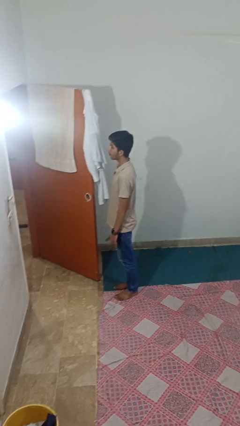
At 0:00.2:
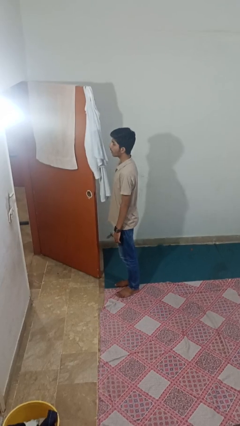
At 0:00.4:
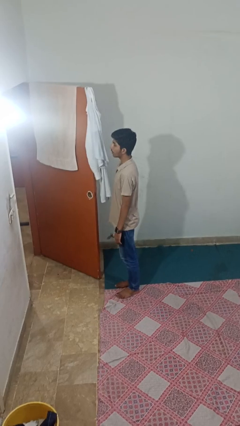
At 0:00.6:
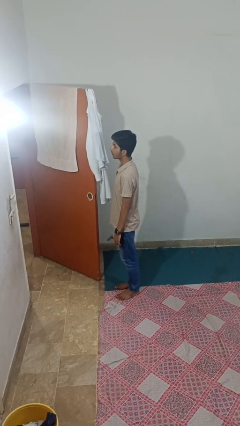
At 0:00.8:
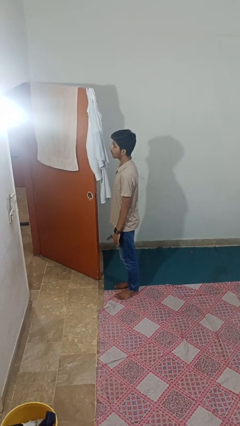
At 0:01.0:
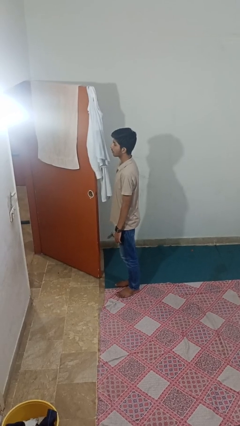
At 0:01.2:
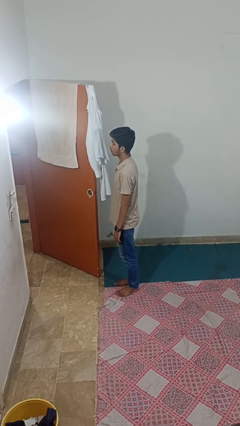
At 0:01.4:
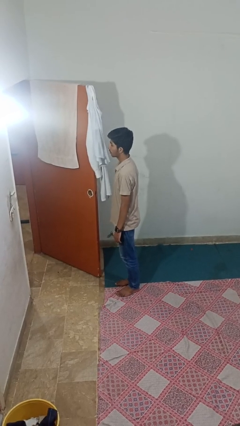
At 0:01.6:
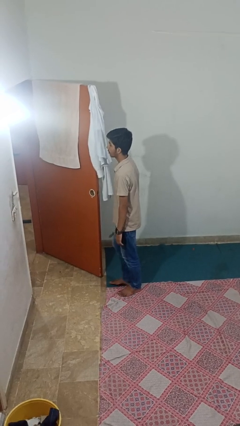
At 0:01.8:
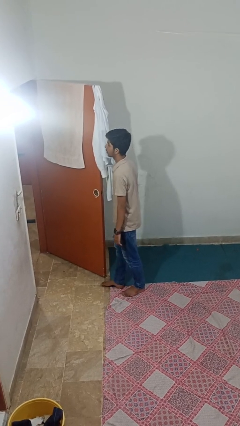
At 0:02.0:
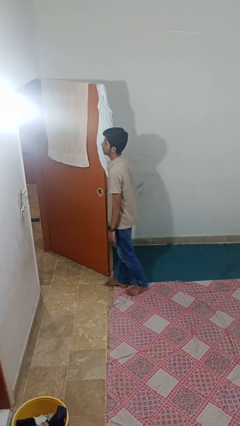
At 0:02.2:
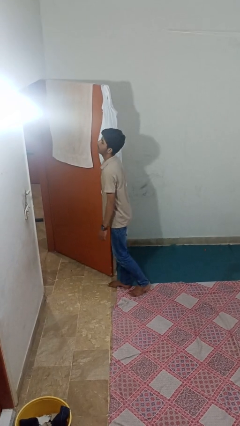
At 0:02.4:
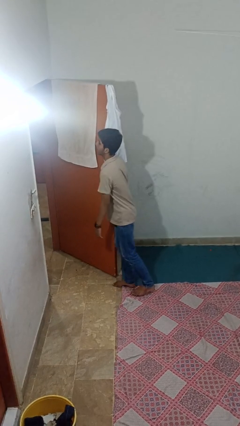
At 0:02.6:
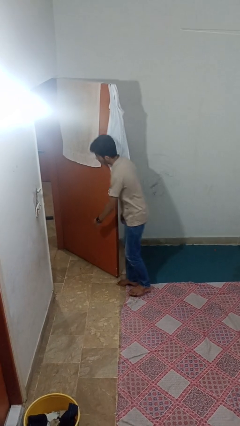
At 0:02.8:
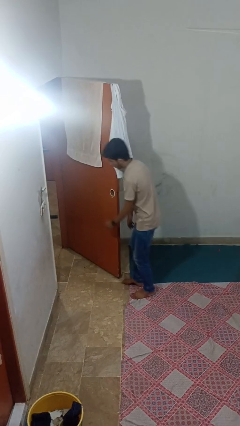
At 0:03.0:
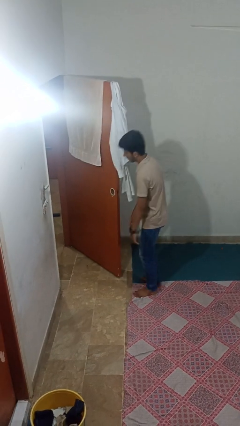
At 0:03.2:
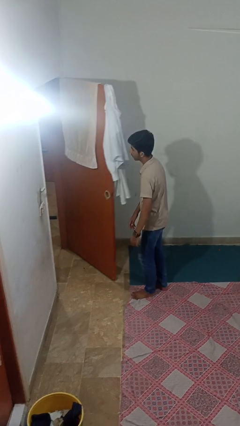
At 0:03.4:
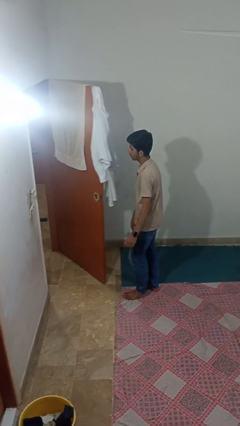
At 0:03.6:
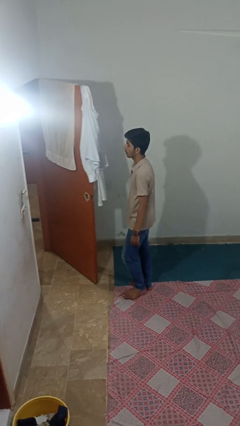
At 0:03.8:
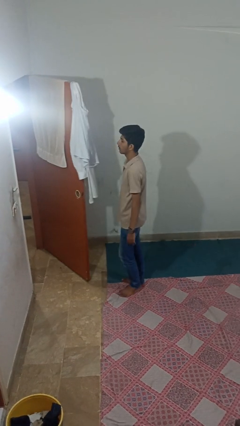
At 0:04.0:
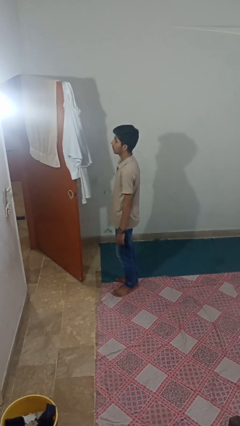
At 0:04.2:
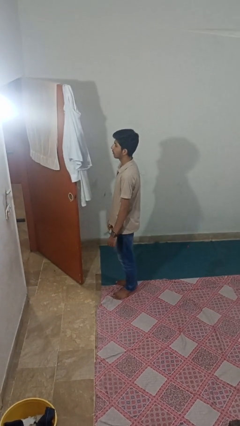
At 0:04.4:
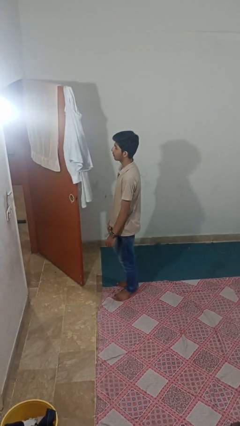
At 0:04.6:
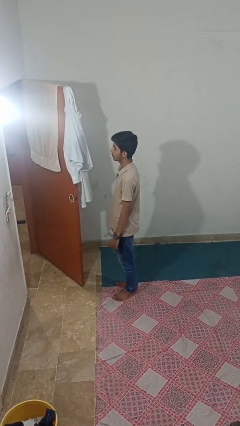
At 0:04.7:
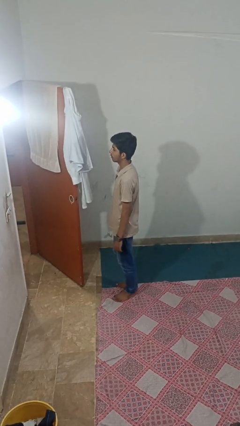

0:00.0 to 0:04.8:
person bumps into wall

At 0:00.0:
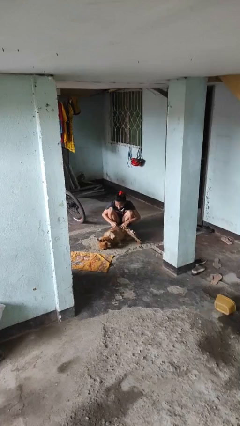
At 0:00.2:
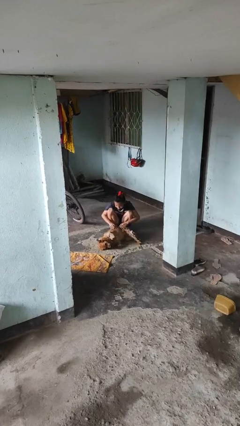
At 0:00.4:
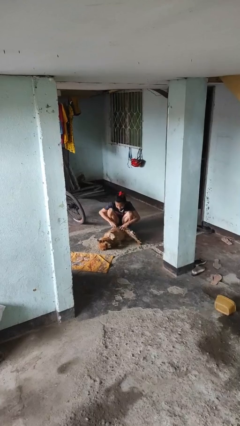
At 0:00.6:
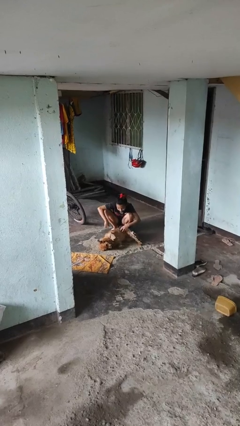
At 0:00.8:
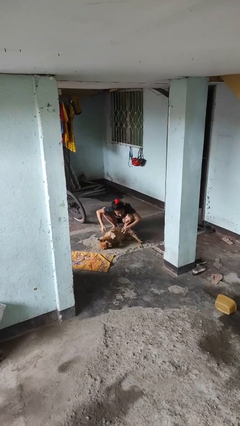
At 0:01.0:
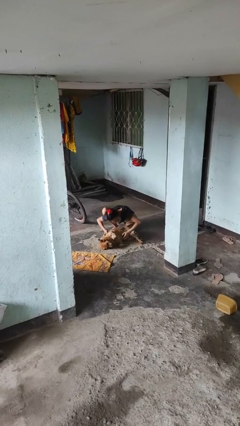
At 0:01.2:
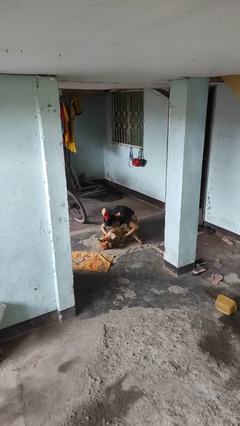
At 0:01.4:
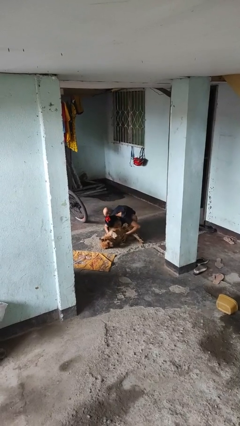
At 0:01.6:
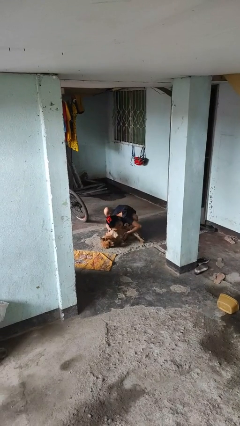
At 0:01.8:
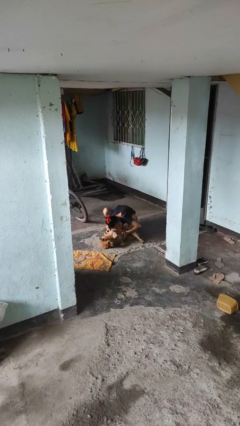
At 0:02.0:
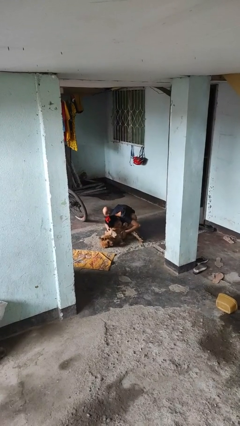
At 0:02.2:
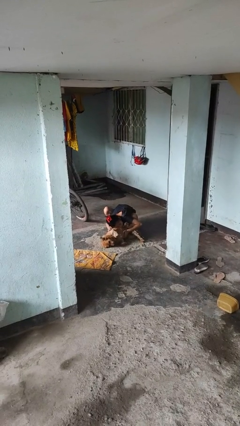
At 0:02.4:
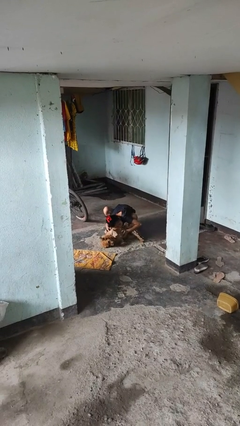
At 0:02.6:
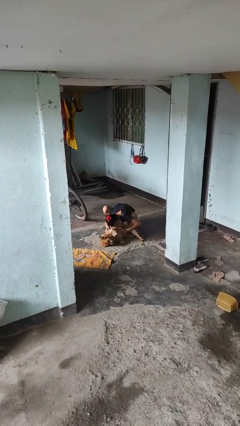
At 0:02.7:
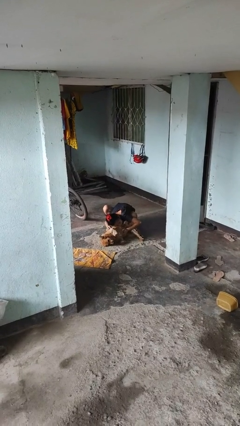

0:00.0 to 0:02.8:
person hugs dog

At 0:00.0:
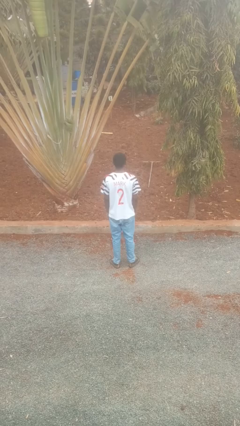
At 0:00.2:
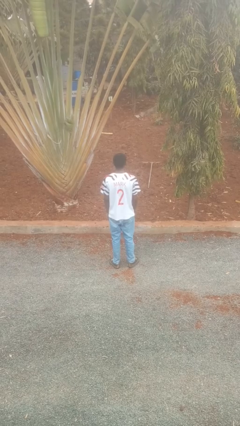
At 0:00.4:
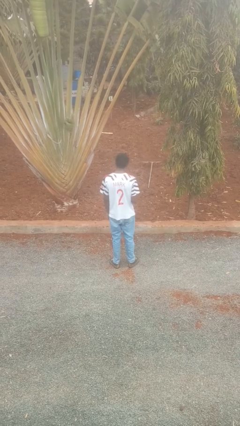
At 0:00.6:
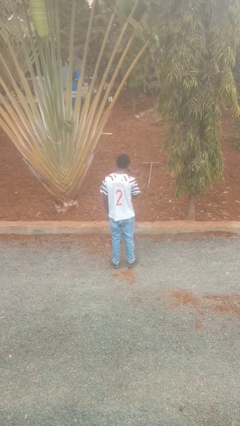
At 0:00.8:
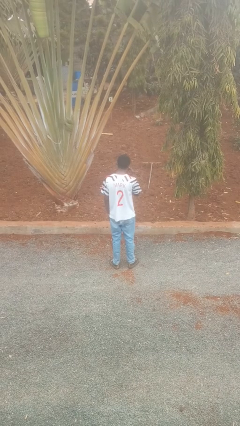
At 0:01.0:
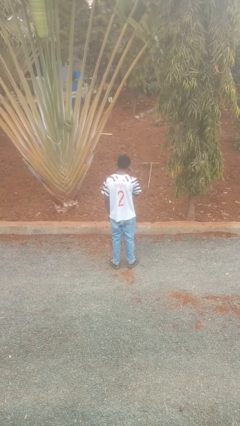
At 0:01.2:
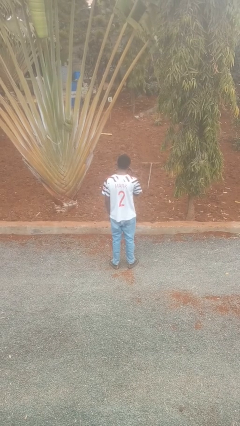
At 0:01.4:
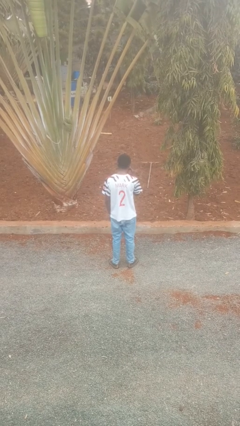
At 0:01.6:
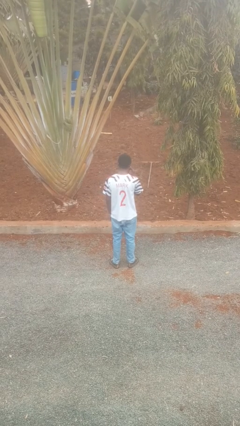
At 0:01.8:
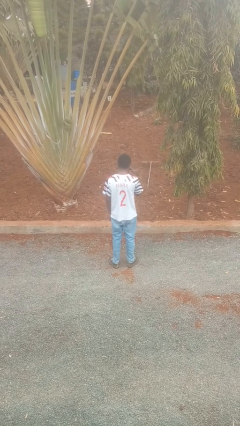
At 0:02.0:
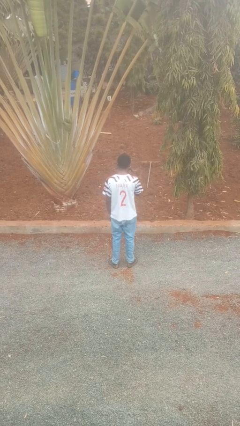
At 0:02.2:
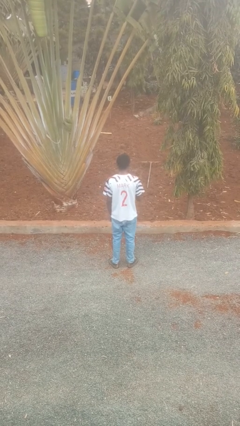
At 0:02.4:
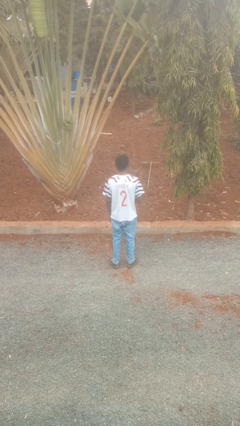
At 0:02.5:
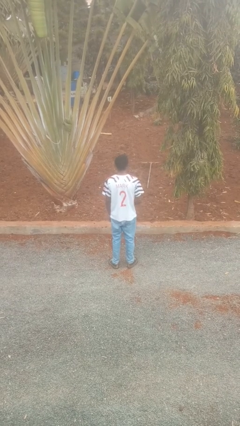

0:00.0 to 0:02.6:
person gestures listen closely

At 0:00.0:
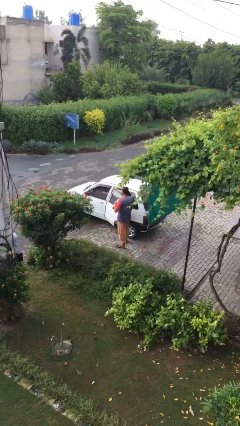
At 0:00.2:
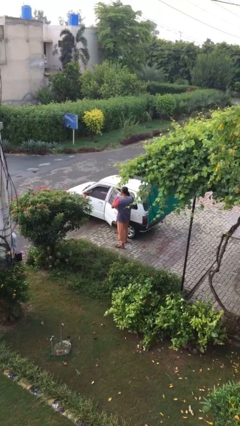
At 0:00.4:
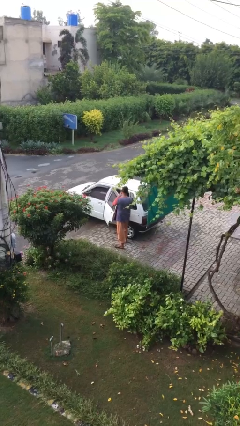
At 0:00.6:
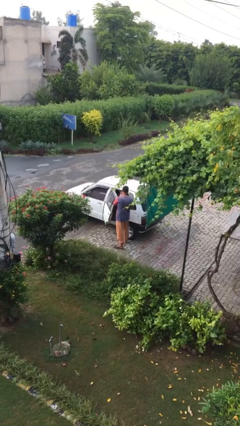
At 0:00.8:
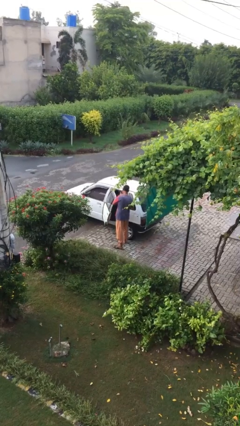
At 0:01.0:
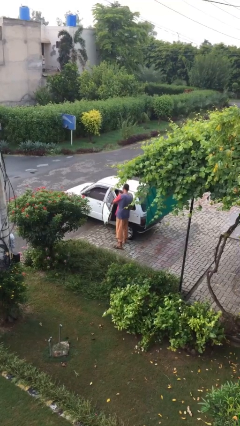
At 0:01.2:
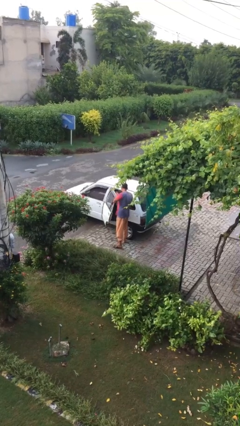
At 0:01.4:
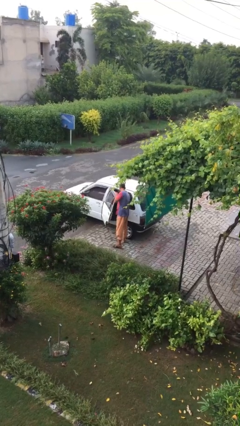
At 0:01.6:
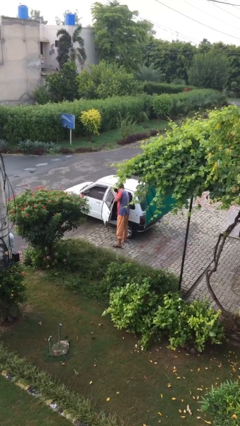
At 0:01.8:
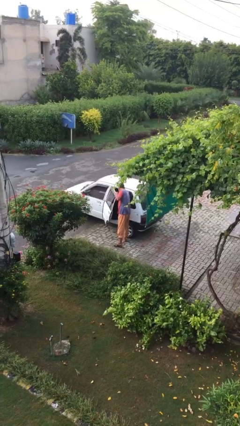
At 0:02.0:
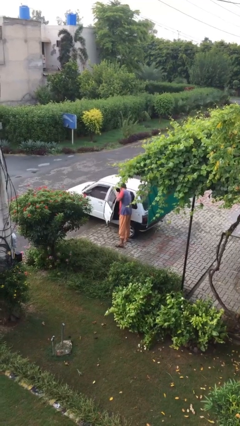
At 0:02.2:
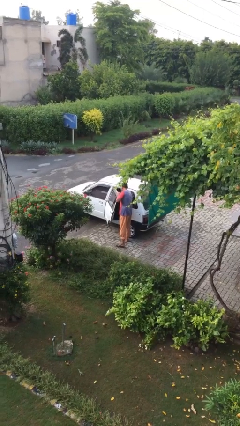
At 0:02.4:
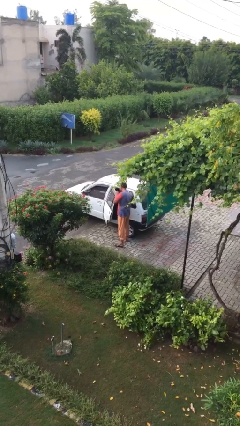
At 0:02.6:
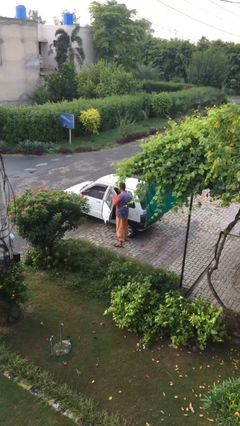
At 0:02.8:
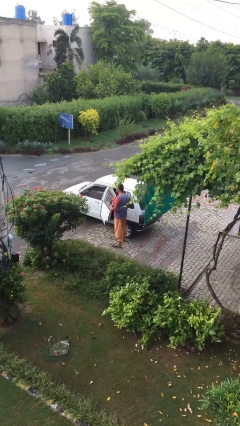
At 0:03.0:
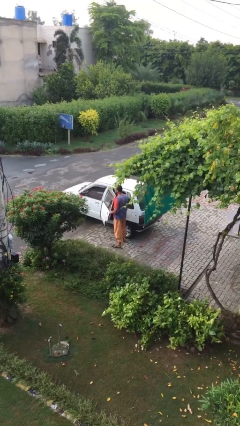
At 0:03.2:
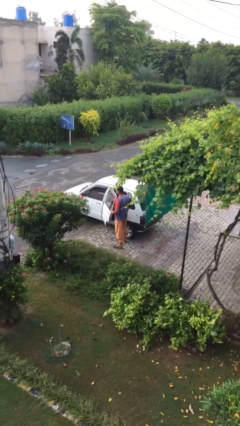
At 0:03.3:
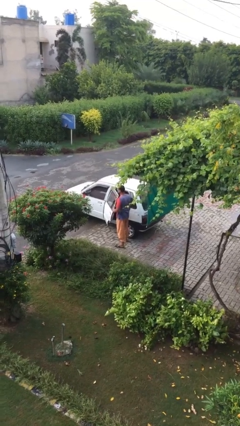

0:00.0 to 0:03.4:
person loads car

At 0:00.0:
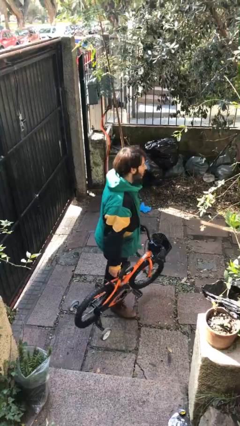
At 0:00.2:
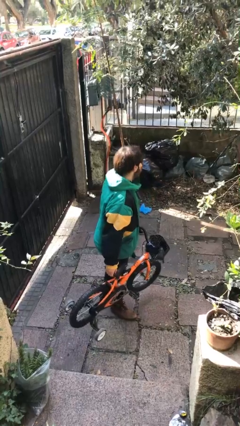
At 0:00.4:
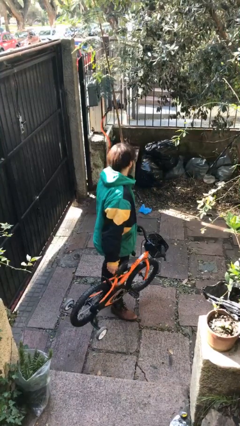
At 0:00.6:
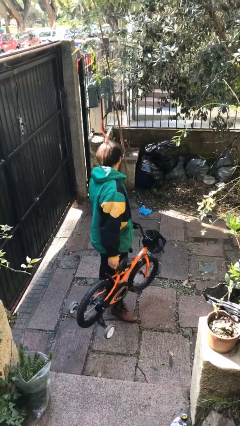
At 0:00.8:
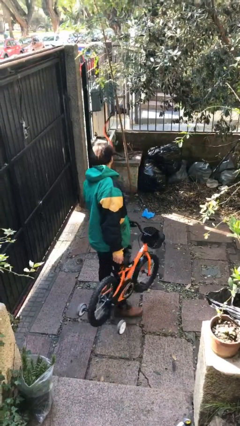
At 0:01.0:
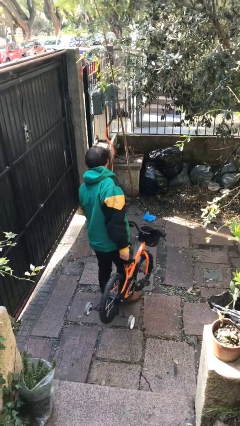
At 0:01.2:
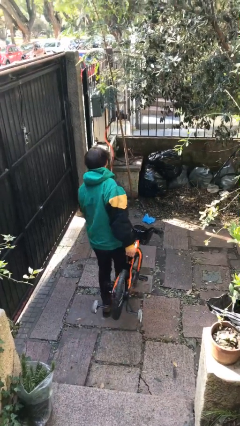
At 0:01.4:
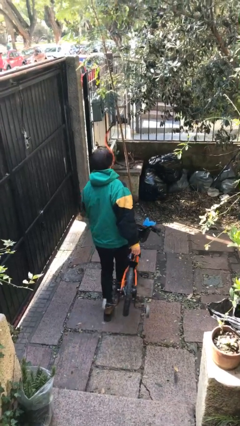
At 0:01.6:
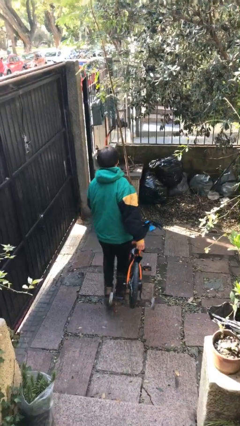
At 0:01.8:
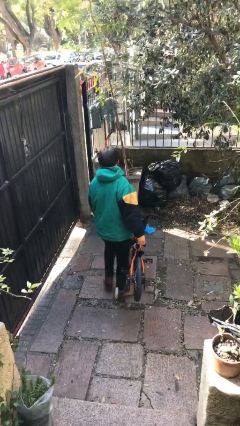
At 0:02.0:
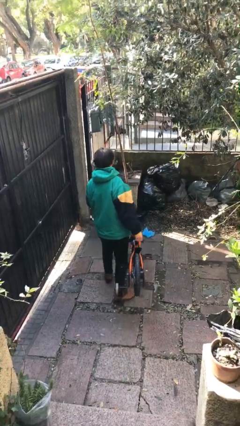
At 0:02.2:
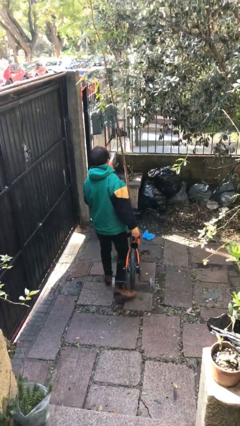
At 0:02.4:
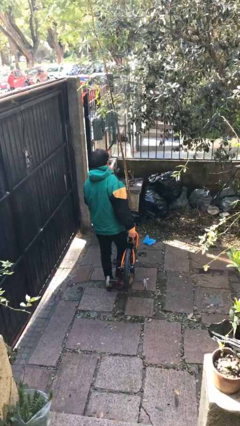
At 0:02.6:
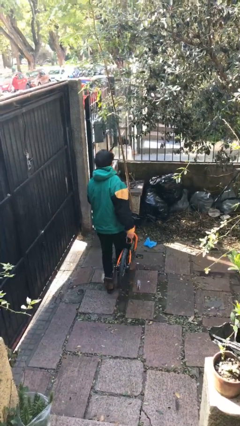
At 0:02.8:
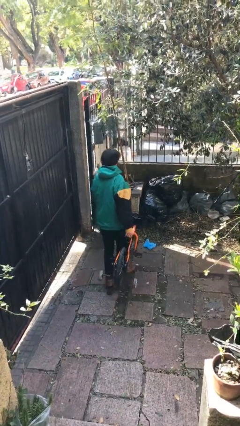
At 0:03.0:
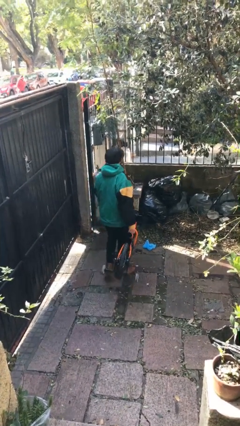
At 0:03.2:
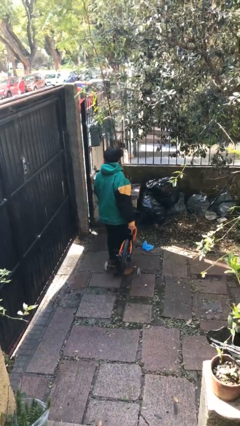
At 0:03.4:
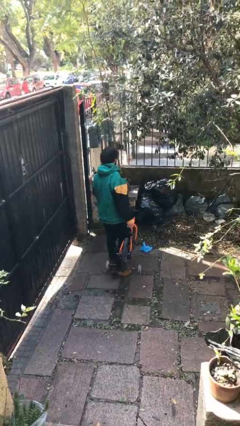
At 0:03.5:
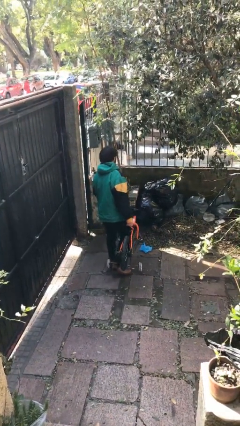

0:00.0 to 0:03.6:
person carries bicycle
